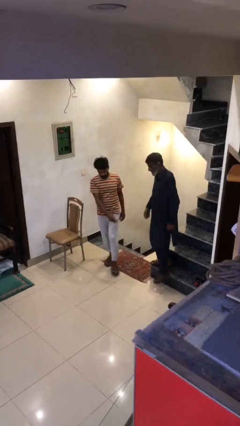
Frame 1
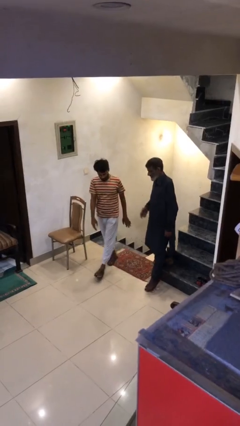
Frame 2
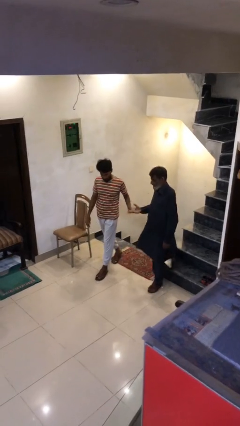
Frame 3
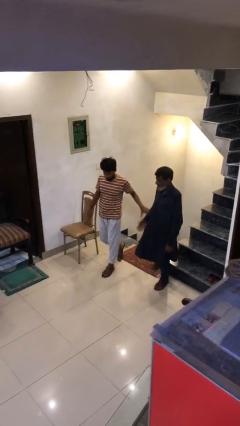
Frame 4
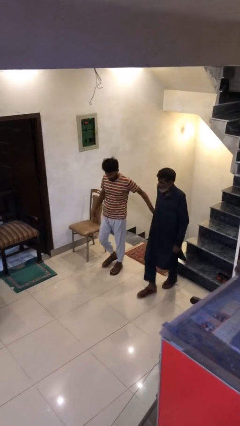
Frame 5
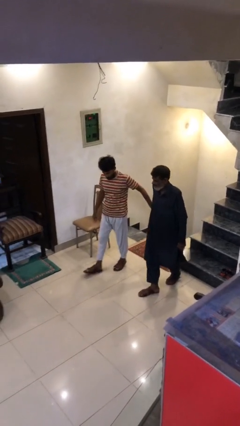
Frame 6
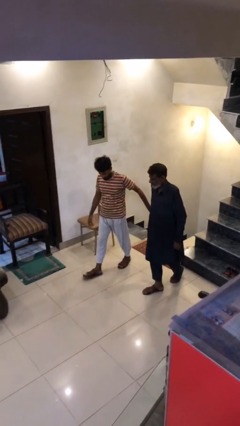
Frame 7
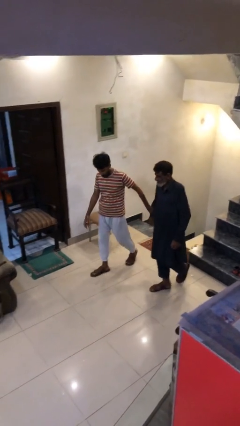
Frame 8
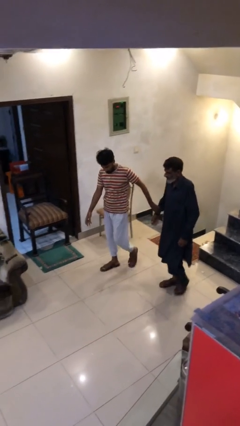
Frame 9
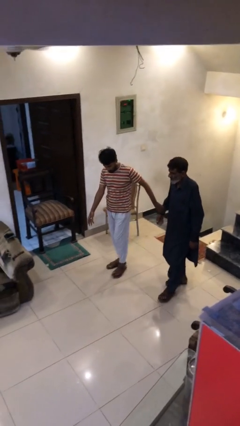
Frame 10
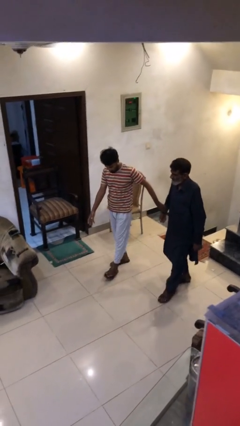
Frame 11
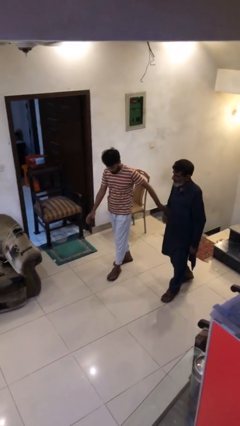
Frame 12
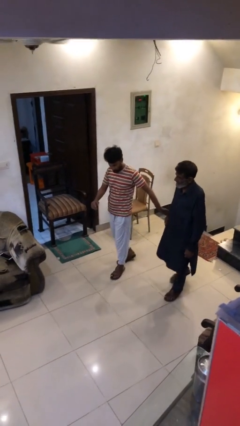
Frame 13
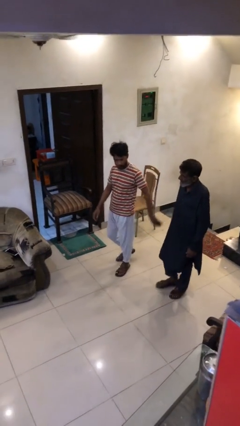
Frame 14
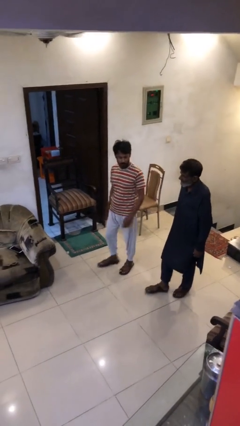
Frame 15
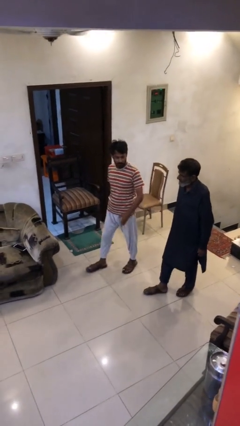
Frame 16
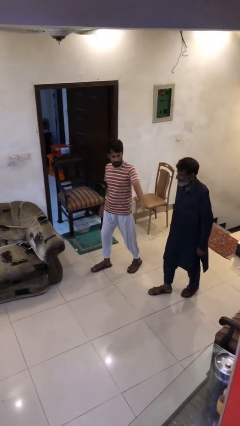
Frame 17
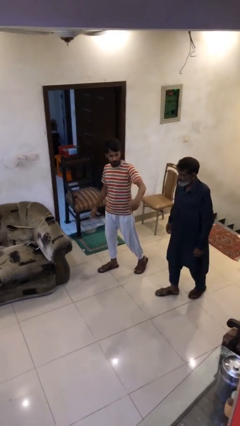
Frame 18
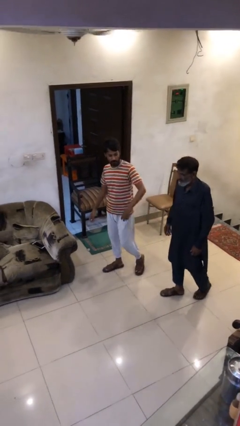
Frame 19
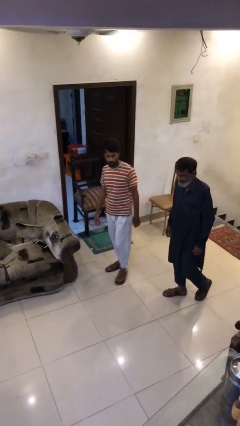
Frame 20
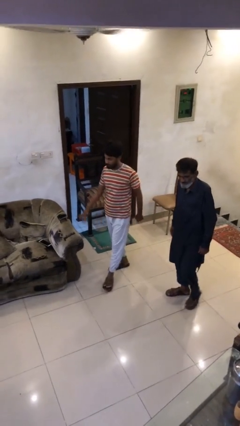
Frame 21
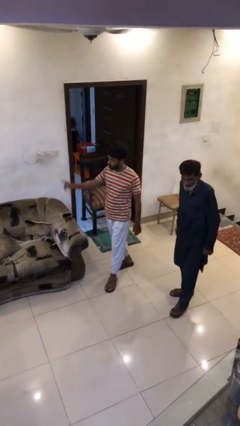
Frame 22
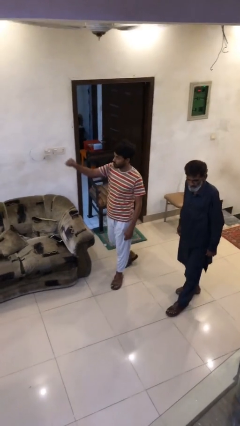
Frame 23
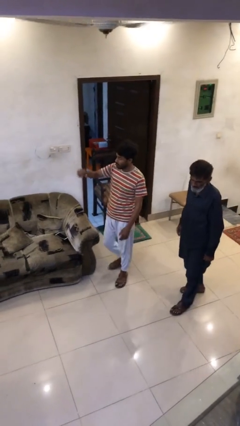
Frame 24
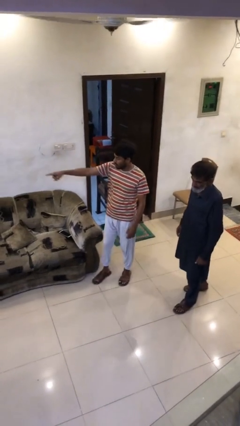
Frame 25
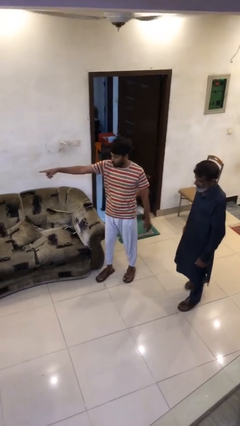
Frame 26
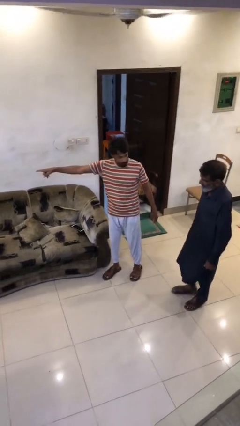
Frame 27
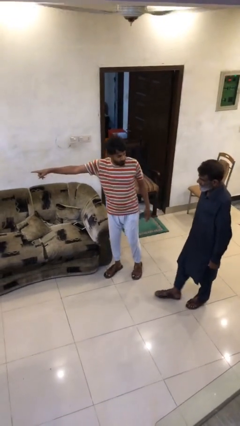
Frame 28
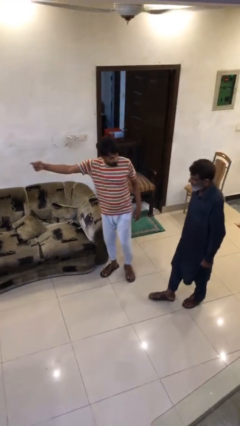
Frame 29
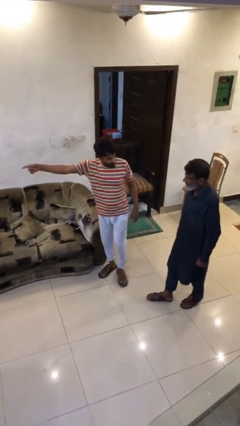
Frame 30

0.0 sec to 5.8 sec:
person talks to person

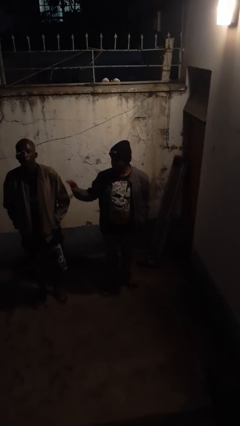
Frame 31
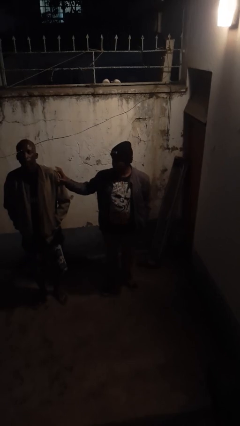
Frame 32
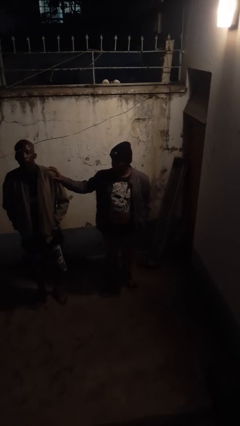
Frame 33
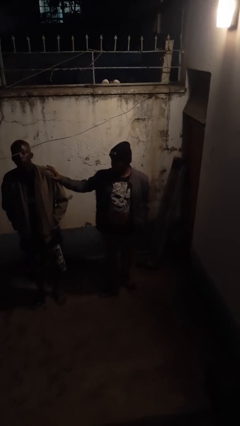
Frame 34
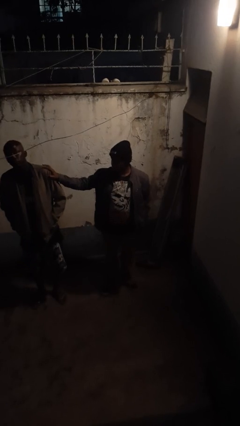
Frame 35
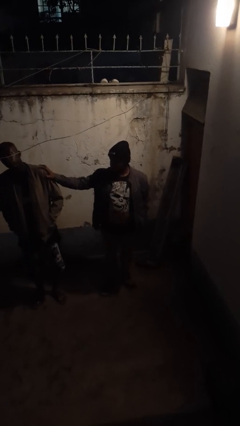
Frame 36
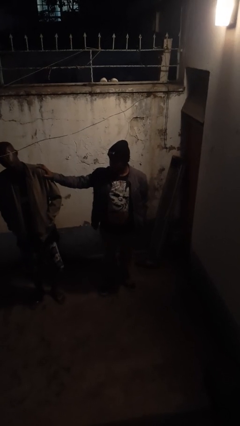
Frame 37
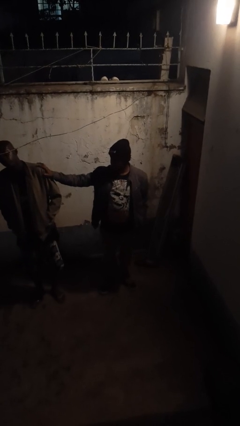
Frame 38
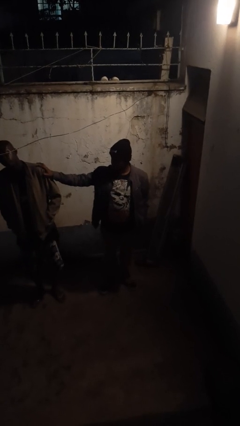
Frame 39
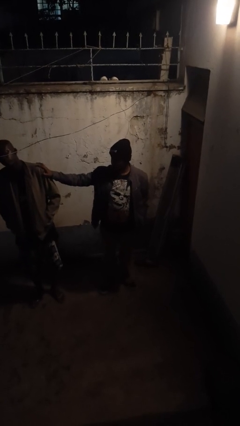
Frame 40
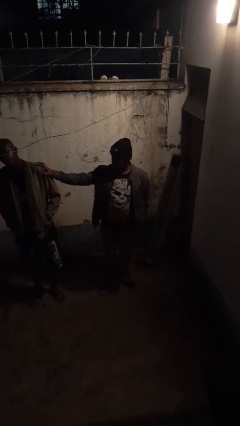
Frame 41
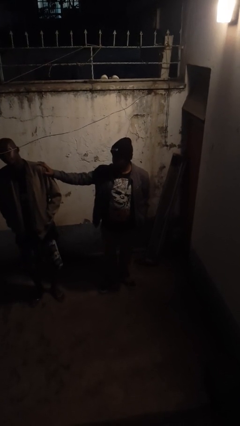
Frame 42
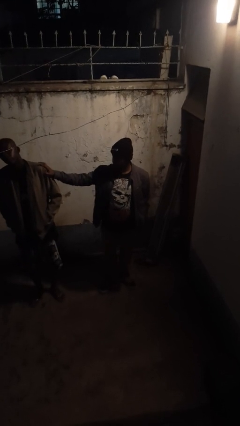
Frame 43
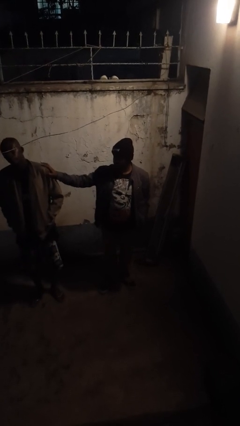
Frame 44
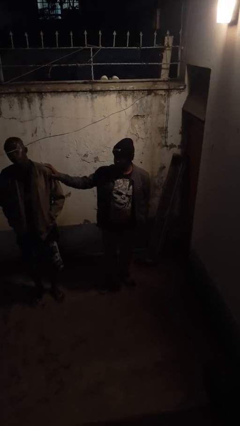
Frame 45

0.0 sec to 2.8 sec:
person shoves person

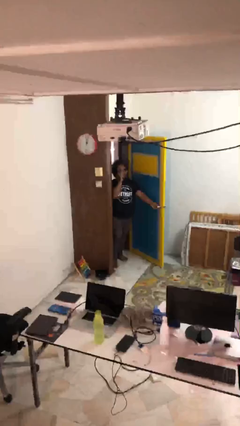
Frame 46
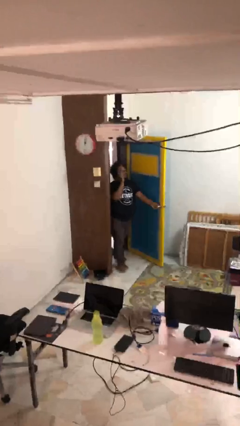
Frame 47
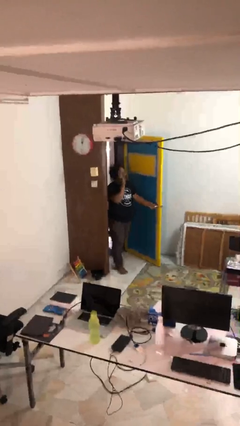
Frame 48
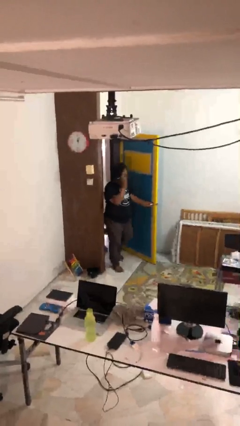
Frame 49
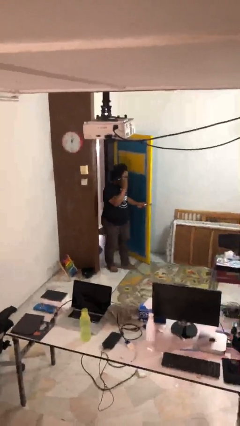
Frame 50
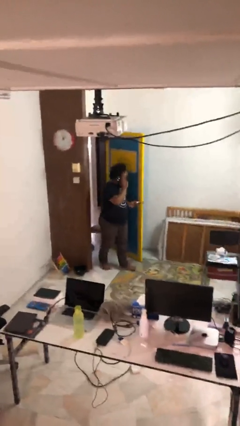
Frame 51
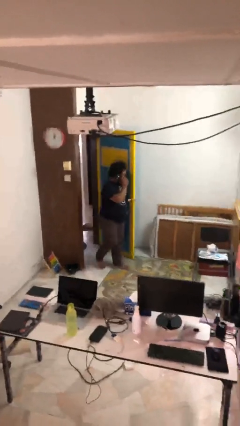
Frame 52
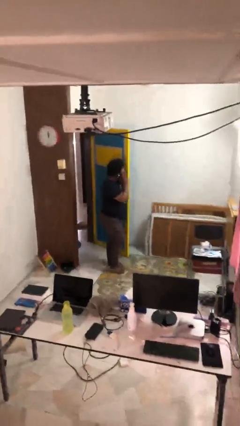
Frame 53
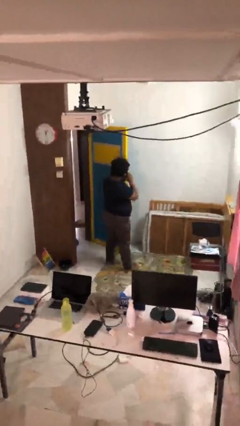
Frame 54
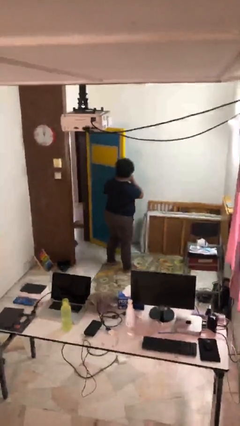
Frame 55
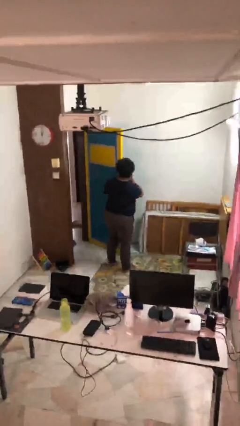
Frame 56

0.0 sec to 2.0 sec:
person enters scene through structure

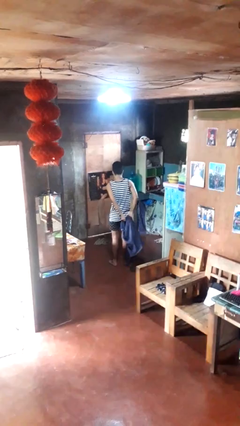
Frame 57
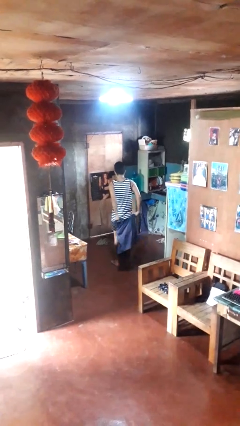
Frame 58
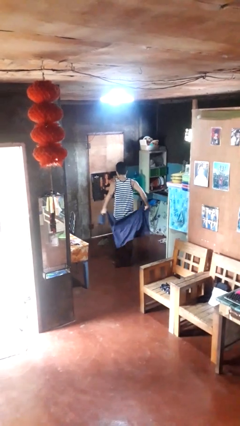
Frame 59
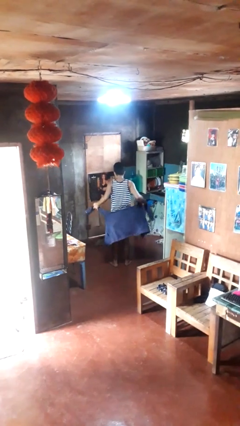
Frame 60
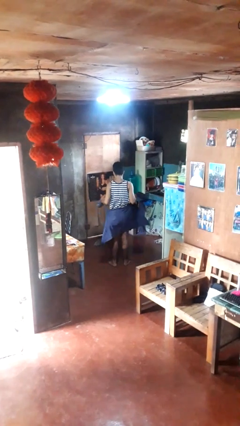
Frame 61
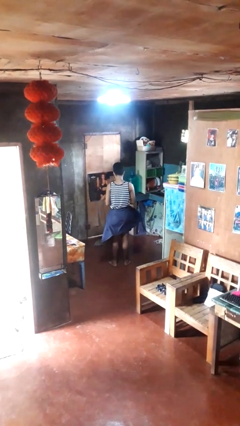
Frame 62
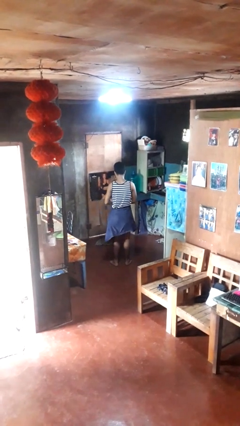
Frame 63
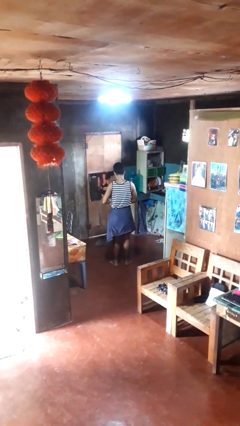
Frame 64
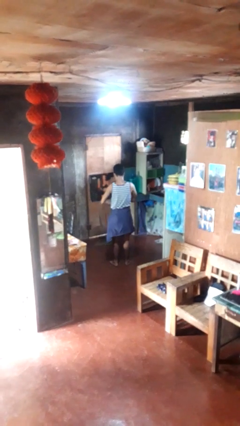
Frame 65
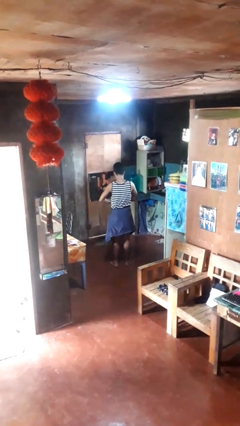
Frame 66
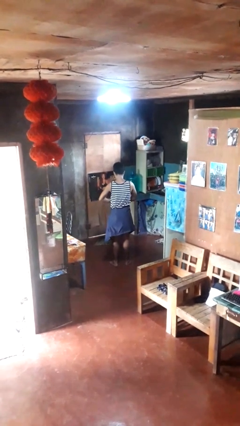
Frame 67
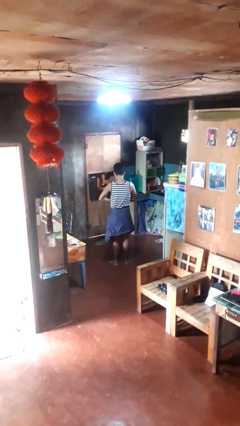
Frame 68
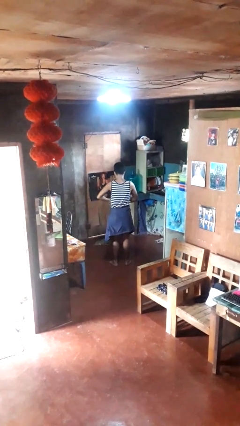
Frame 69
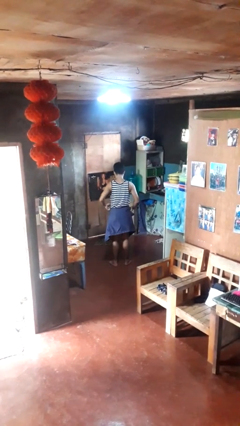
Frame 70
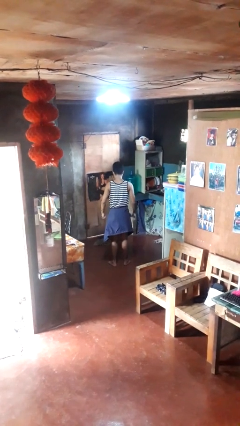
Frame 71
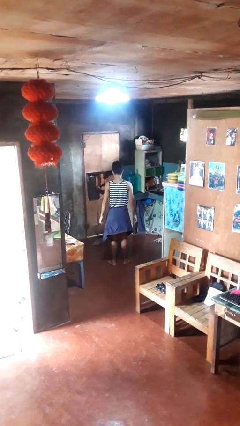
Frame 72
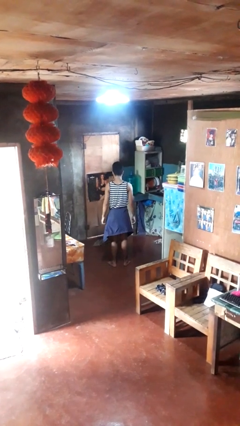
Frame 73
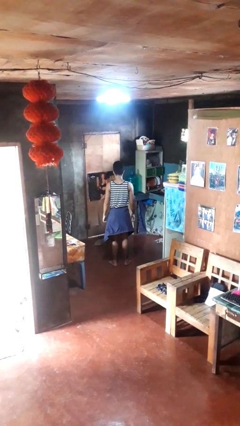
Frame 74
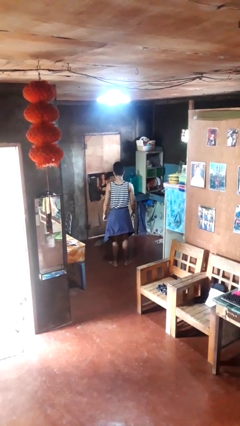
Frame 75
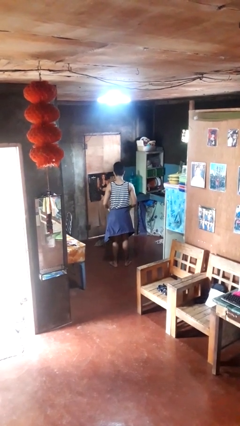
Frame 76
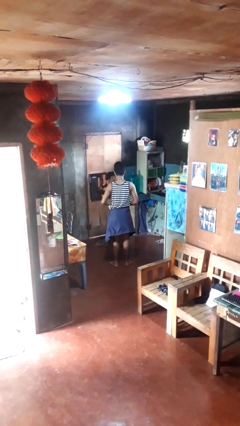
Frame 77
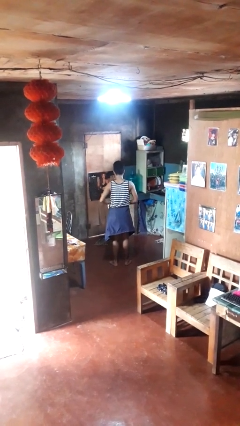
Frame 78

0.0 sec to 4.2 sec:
person ties jacket around waist

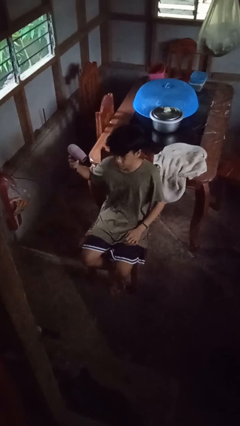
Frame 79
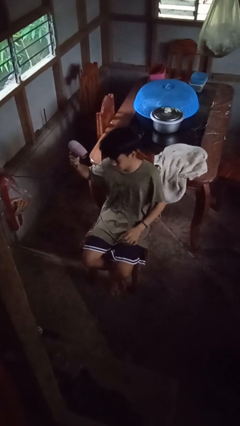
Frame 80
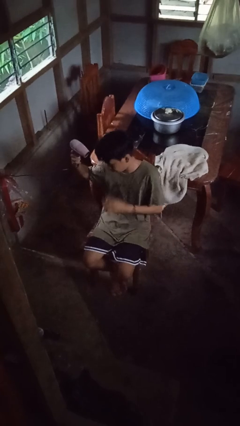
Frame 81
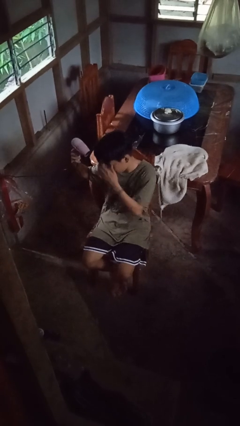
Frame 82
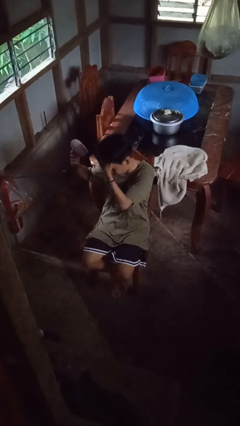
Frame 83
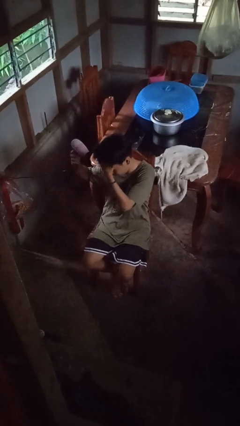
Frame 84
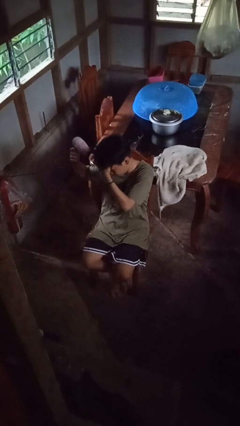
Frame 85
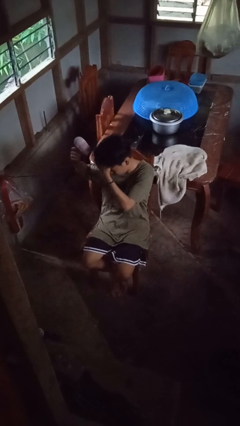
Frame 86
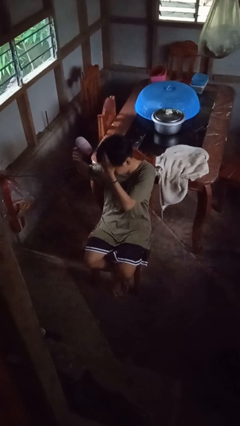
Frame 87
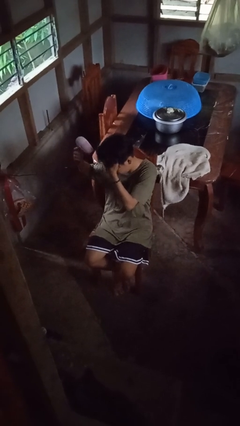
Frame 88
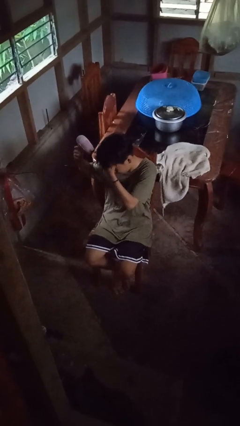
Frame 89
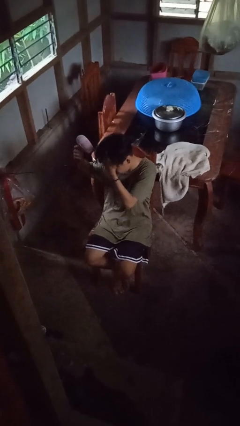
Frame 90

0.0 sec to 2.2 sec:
person dries hair with hairdryer

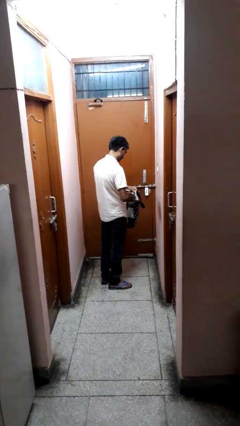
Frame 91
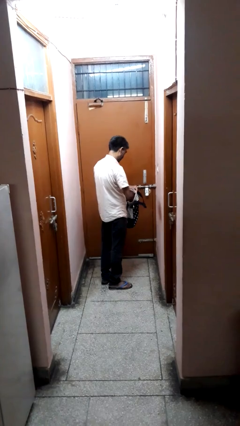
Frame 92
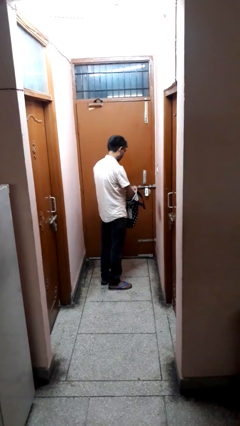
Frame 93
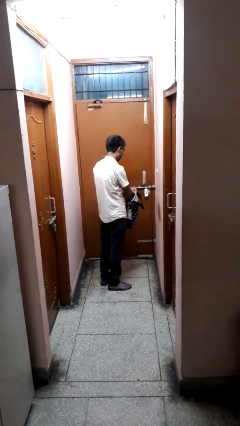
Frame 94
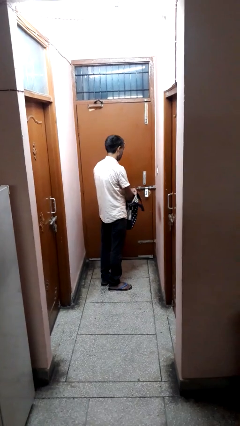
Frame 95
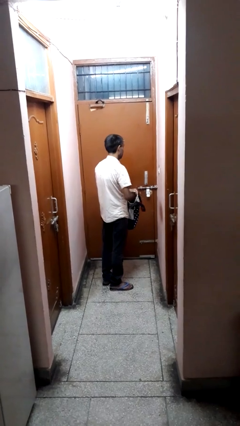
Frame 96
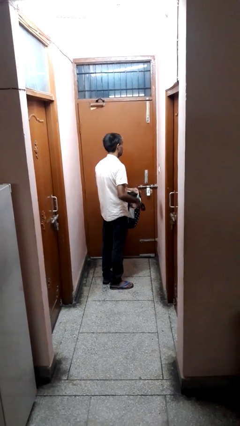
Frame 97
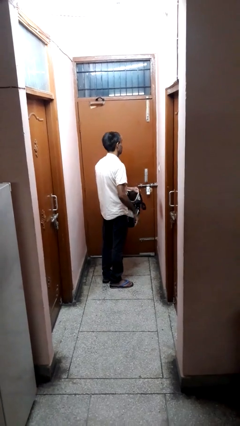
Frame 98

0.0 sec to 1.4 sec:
person puts object into bag
